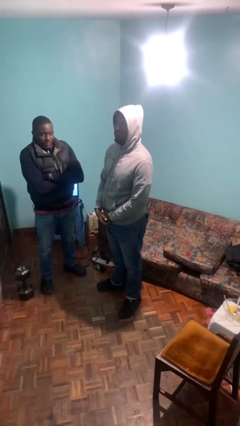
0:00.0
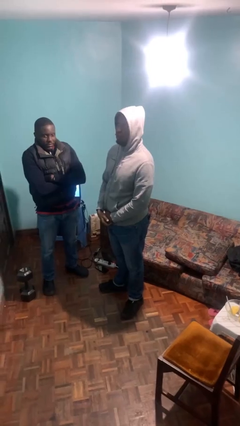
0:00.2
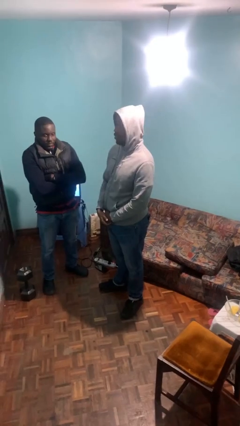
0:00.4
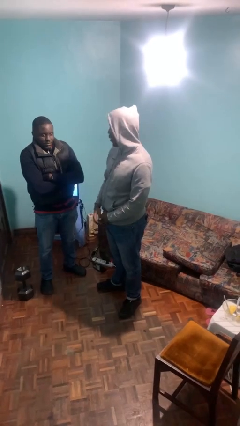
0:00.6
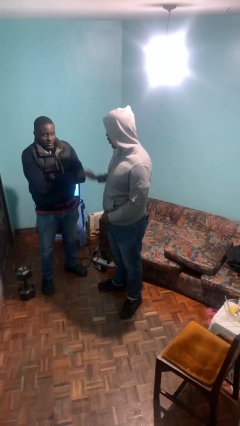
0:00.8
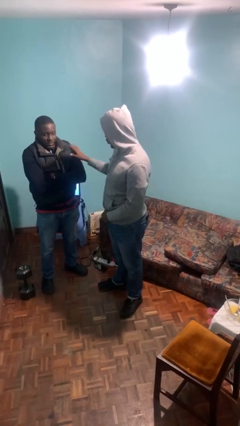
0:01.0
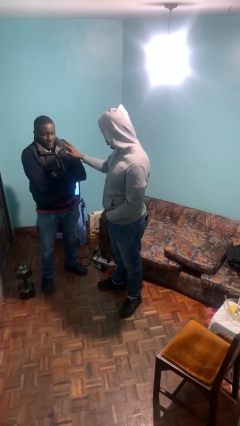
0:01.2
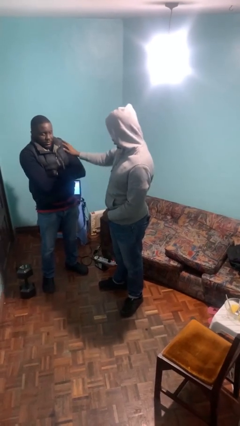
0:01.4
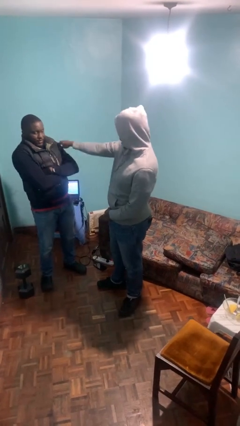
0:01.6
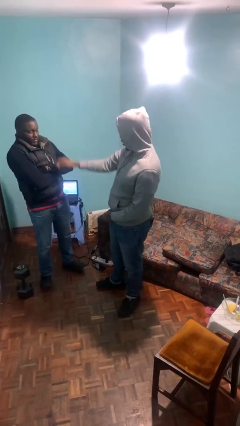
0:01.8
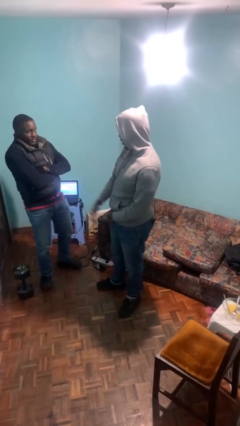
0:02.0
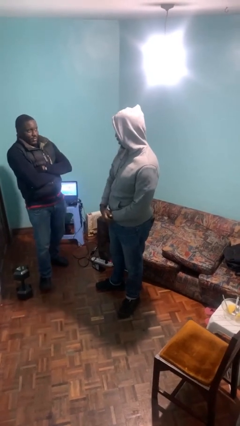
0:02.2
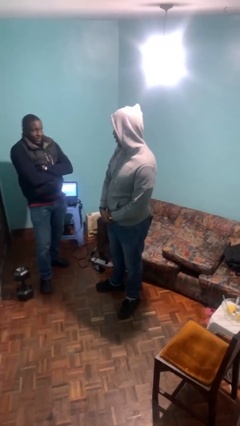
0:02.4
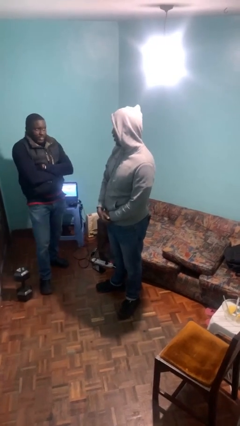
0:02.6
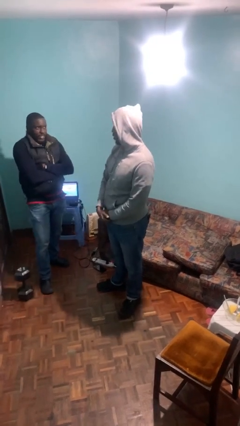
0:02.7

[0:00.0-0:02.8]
person shoves person

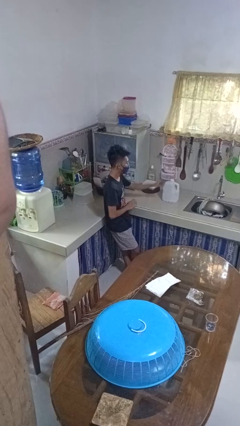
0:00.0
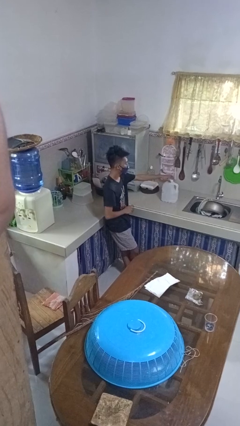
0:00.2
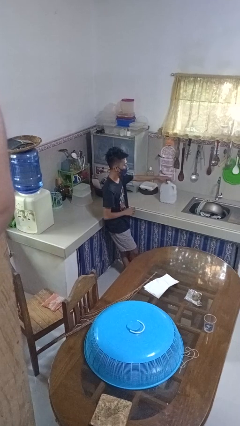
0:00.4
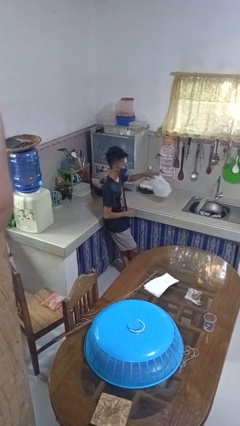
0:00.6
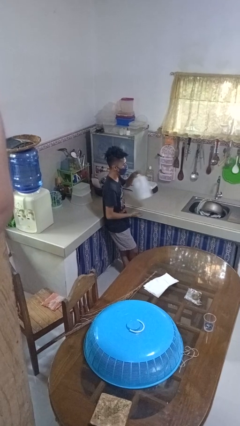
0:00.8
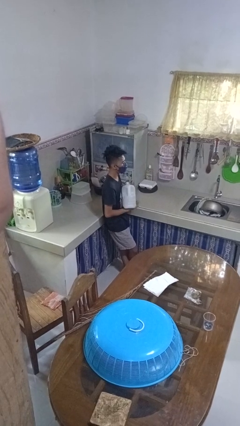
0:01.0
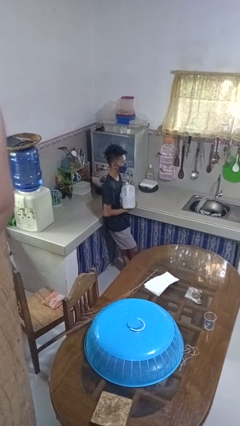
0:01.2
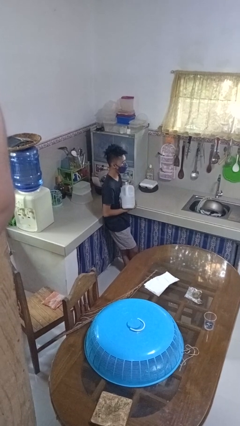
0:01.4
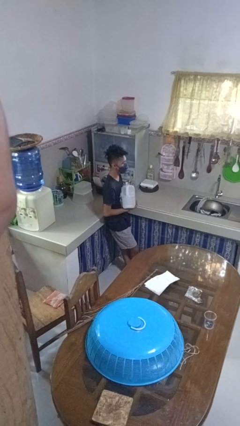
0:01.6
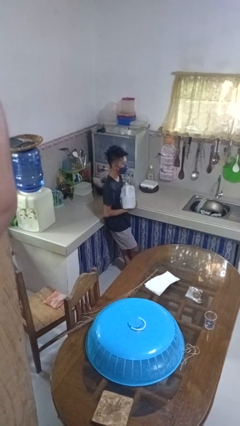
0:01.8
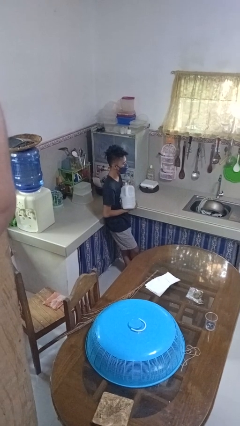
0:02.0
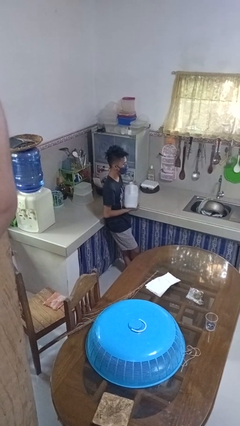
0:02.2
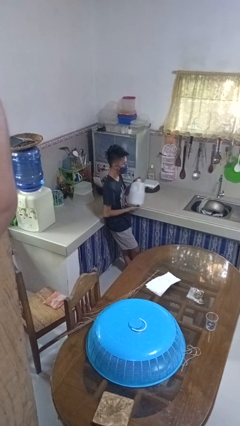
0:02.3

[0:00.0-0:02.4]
person picks up object from countertop

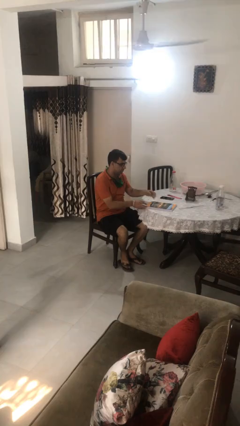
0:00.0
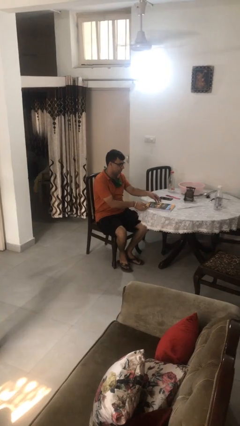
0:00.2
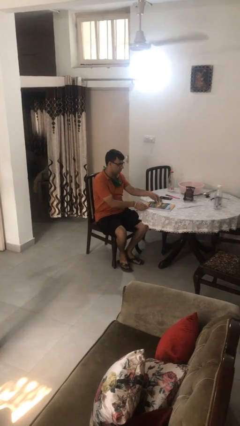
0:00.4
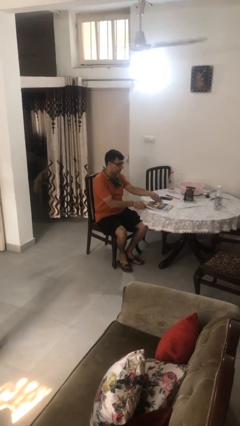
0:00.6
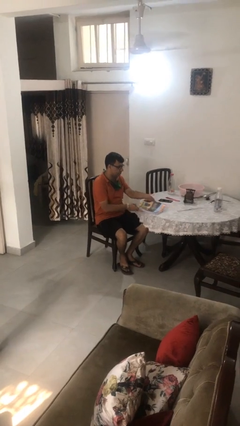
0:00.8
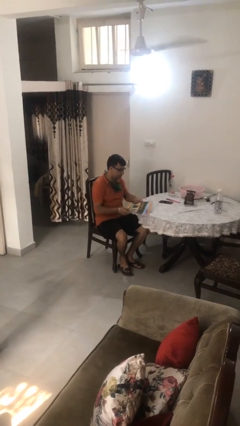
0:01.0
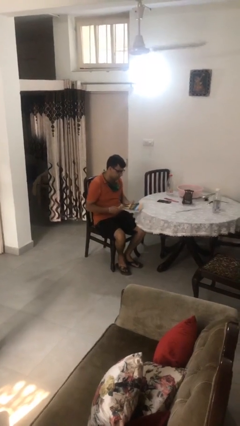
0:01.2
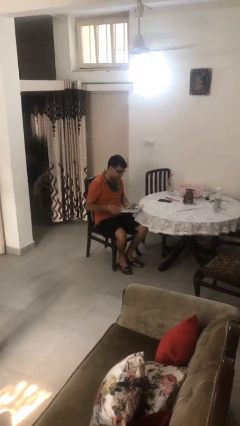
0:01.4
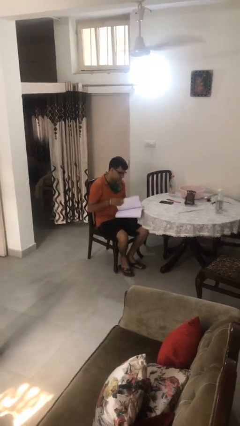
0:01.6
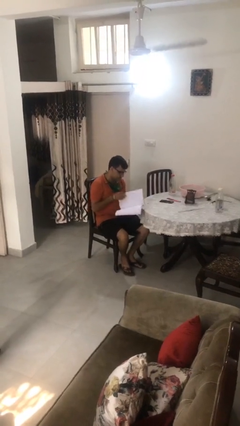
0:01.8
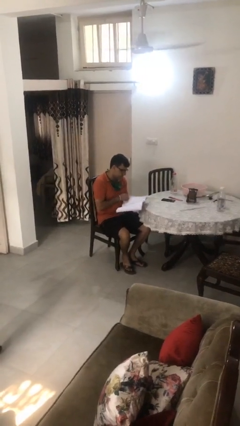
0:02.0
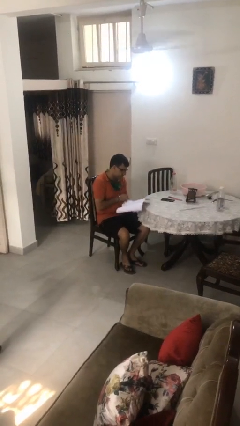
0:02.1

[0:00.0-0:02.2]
person picks up object from table

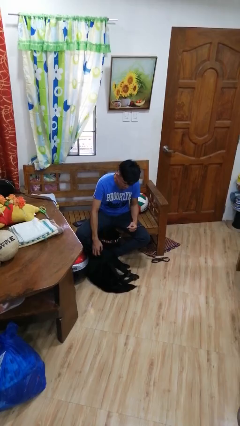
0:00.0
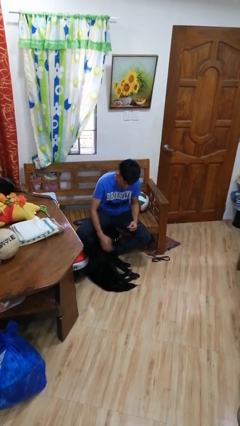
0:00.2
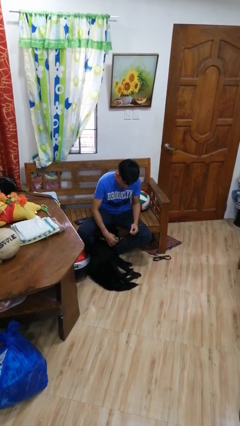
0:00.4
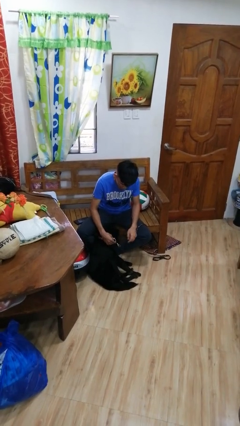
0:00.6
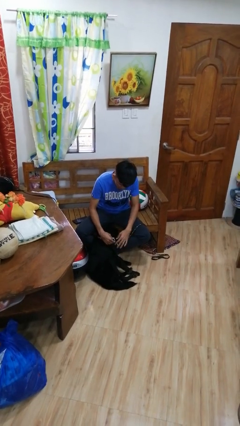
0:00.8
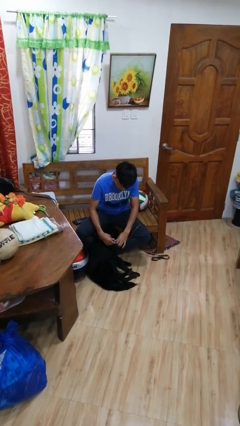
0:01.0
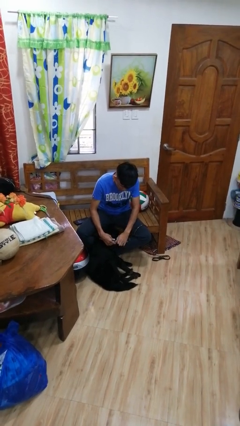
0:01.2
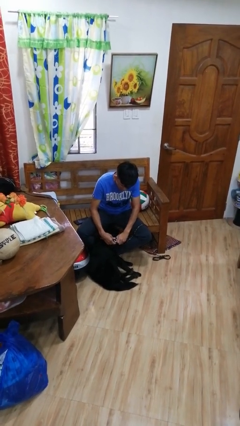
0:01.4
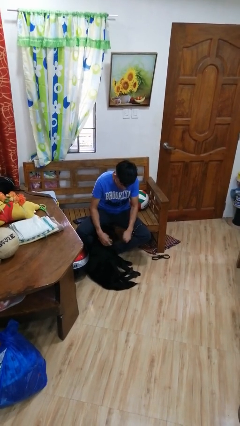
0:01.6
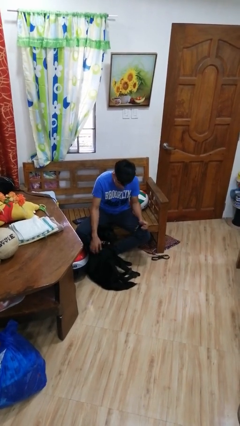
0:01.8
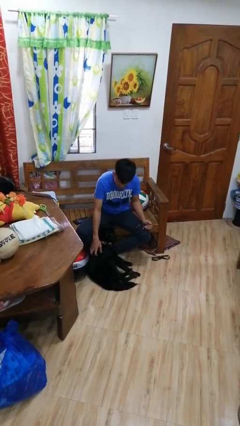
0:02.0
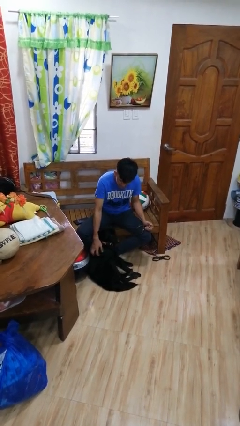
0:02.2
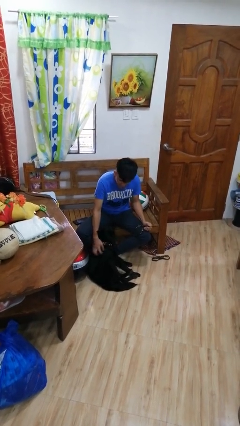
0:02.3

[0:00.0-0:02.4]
person unattaches leash from dog

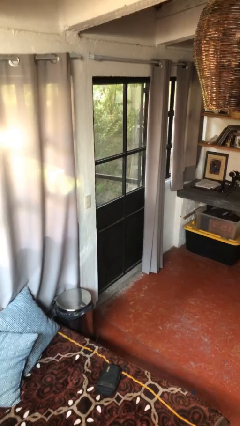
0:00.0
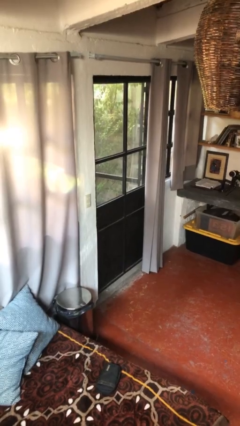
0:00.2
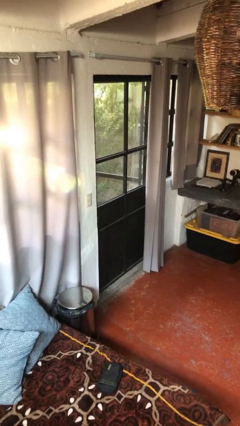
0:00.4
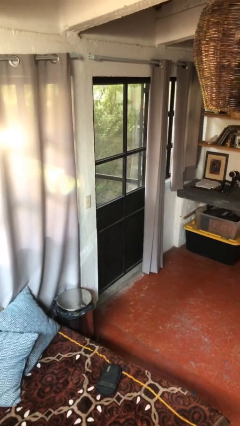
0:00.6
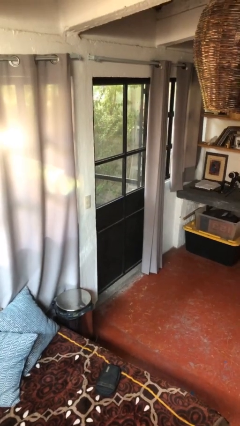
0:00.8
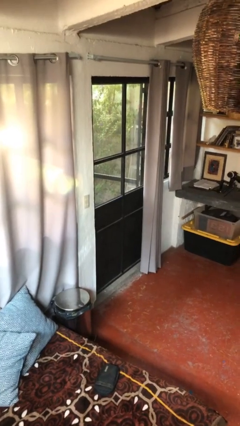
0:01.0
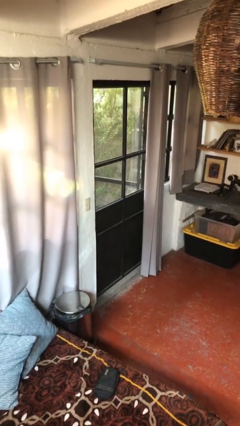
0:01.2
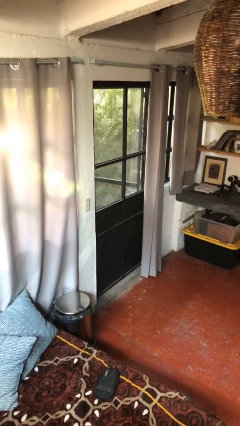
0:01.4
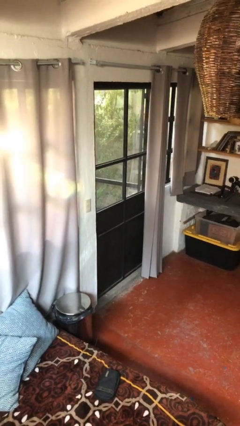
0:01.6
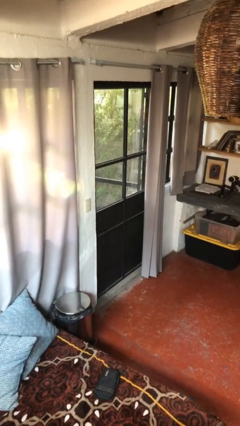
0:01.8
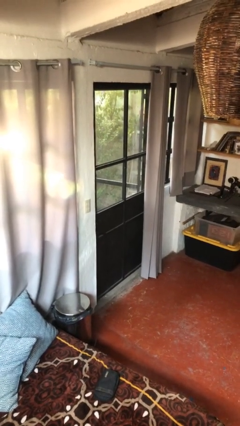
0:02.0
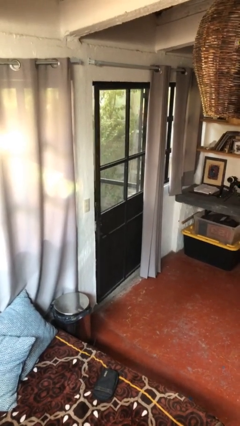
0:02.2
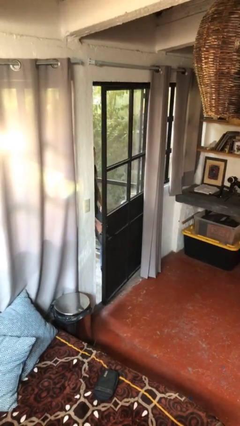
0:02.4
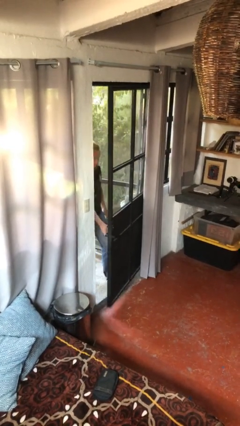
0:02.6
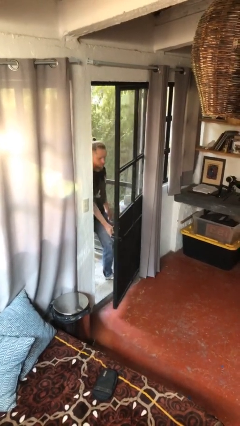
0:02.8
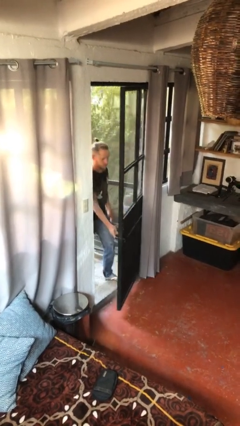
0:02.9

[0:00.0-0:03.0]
person opens facility door

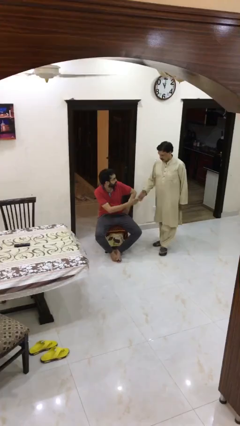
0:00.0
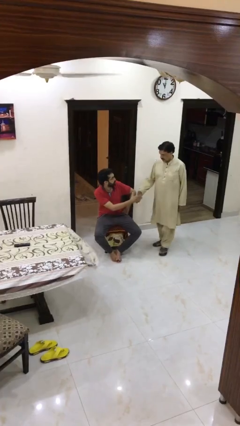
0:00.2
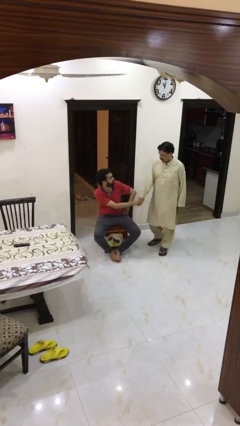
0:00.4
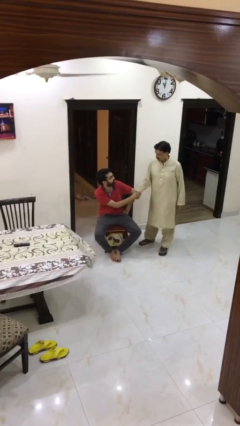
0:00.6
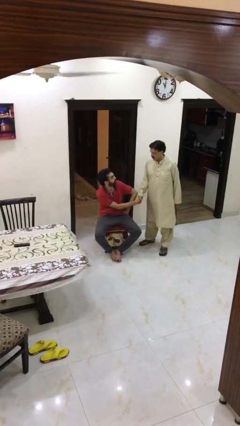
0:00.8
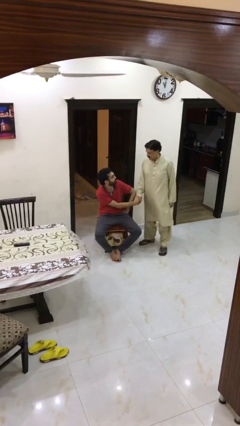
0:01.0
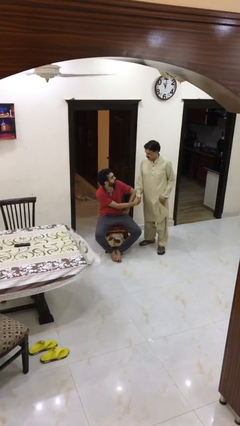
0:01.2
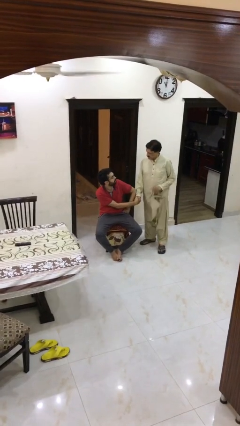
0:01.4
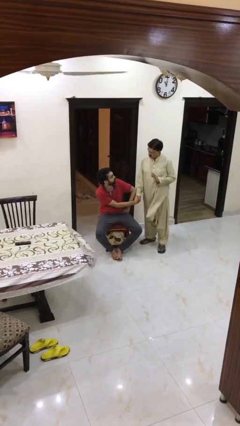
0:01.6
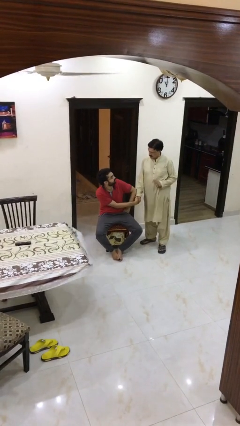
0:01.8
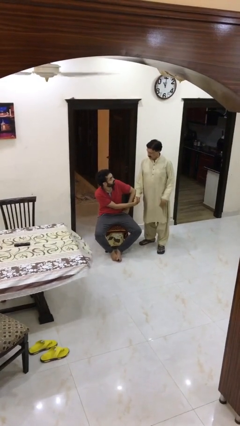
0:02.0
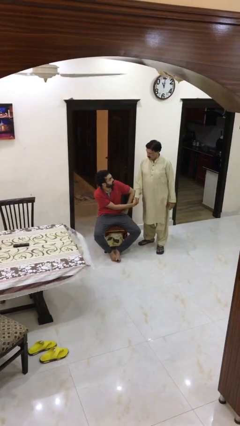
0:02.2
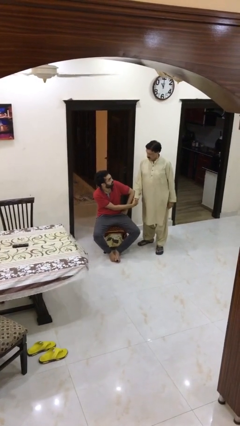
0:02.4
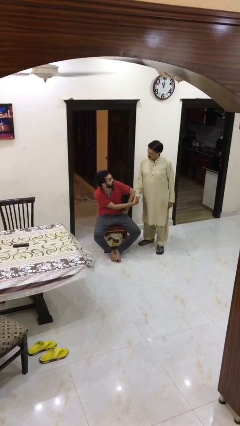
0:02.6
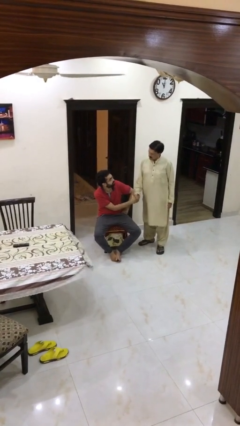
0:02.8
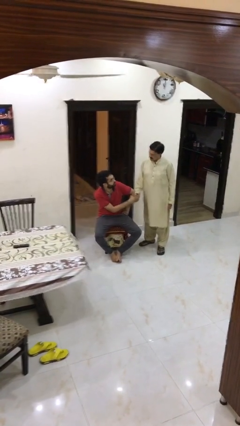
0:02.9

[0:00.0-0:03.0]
person shakes hand

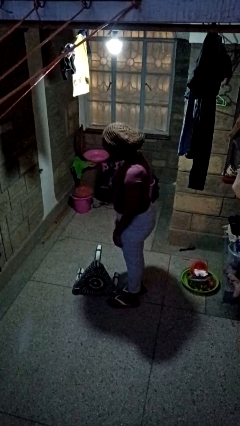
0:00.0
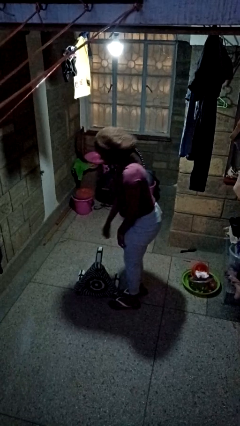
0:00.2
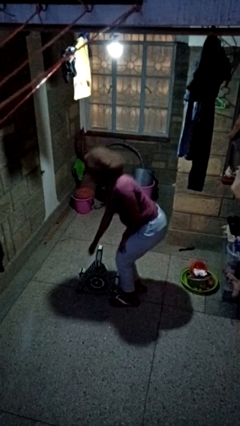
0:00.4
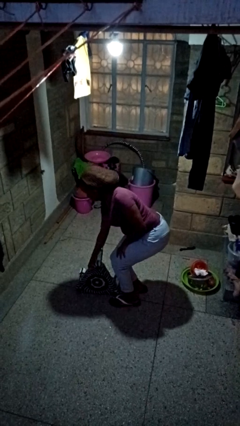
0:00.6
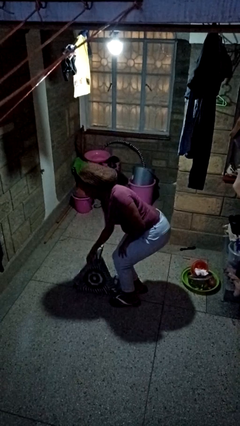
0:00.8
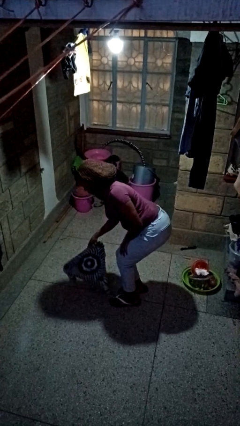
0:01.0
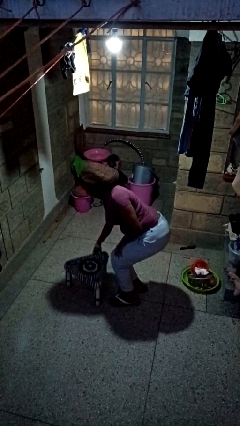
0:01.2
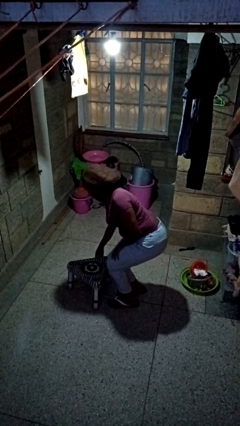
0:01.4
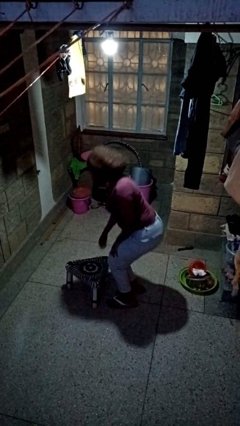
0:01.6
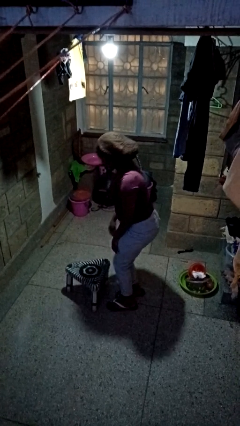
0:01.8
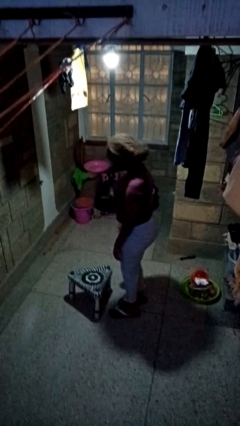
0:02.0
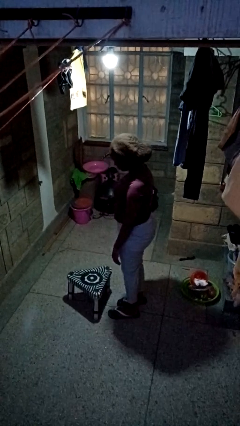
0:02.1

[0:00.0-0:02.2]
person sets upright furniture
